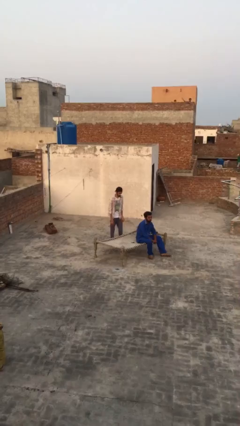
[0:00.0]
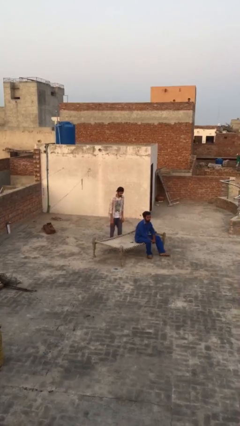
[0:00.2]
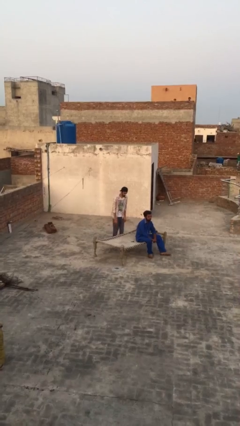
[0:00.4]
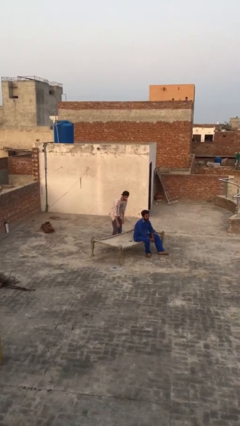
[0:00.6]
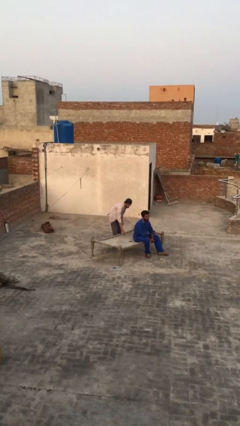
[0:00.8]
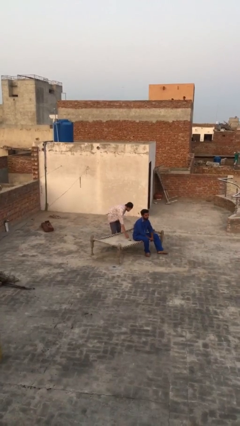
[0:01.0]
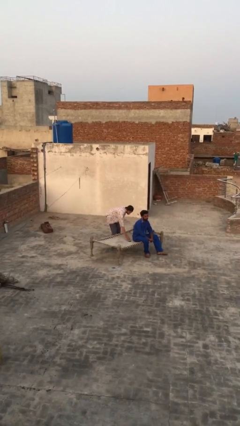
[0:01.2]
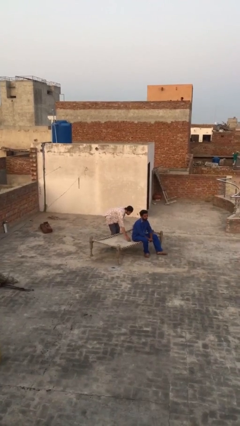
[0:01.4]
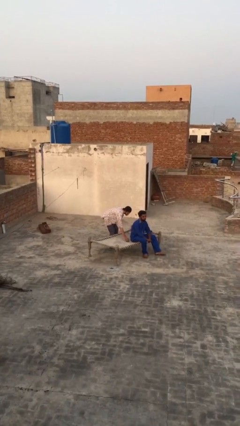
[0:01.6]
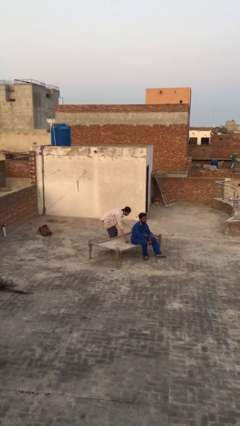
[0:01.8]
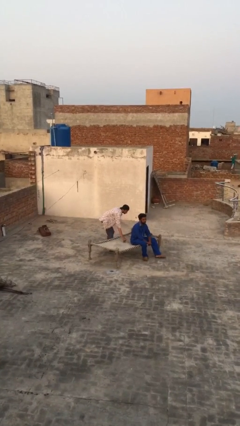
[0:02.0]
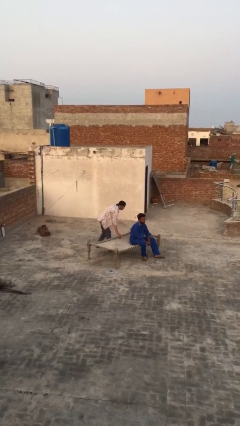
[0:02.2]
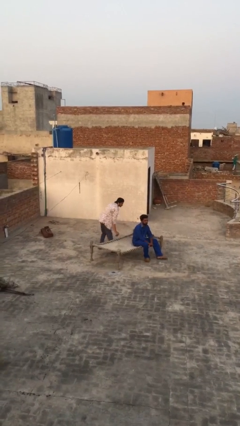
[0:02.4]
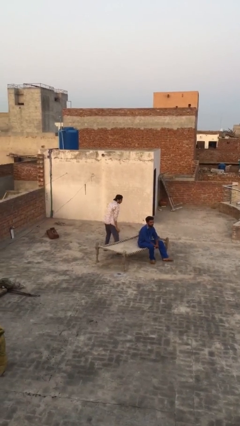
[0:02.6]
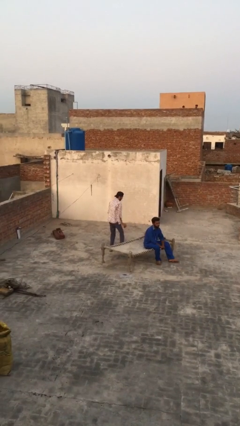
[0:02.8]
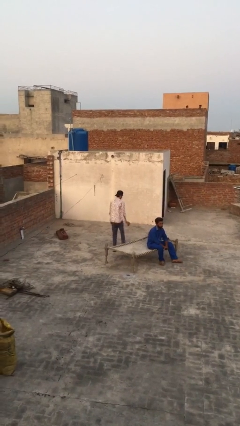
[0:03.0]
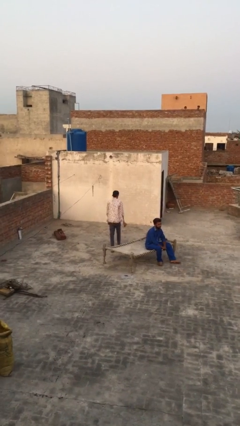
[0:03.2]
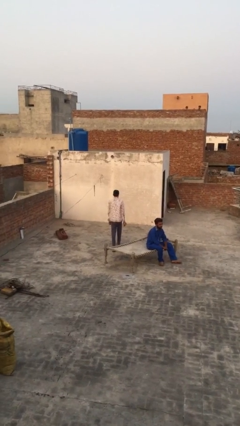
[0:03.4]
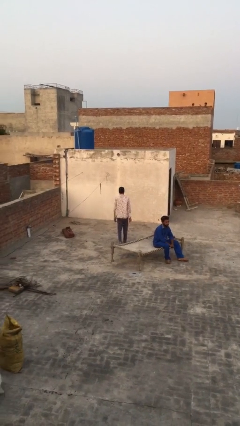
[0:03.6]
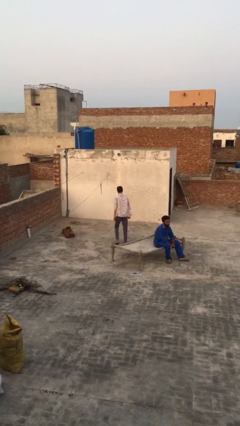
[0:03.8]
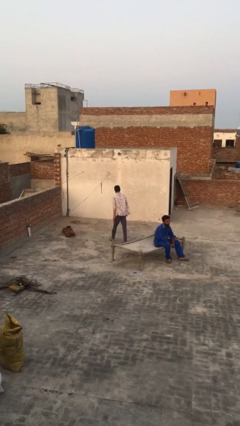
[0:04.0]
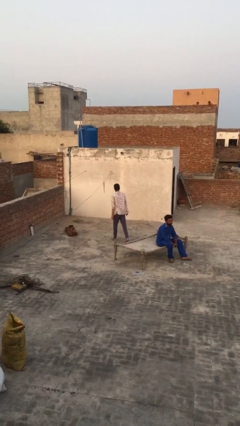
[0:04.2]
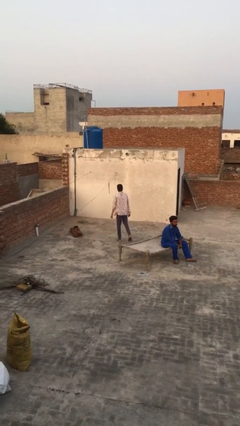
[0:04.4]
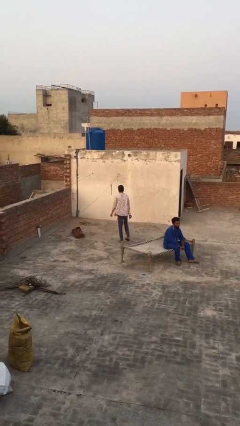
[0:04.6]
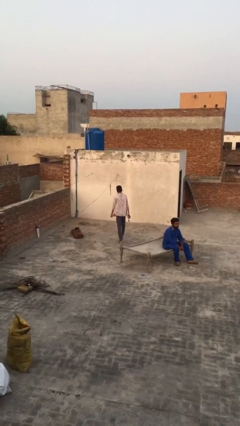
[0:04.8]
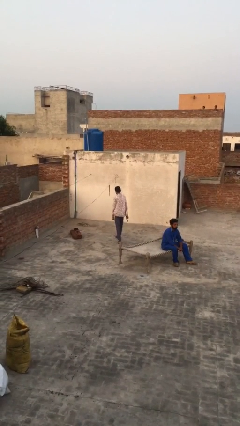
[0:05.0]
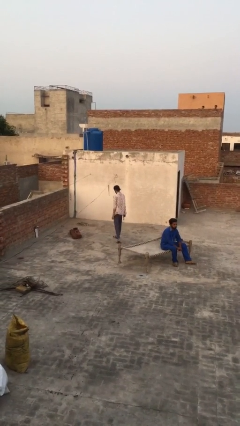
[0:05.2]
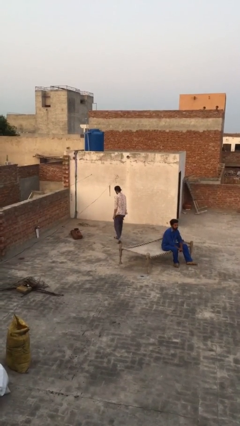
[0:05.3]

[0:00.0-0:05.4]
person steals object from person

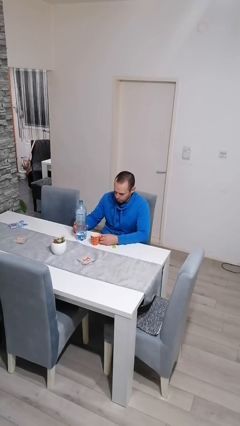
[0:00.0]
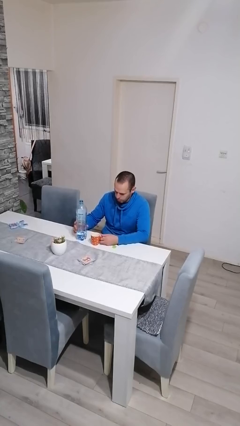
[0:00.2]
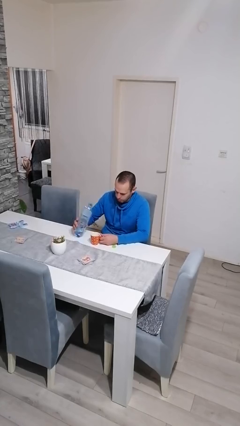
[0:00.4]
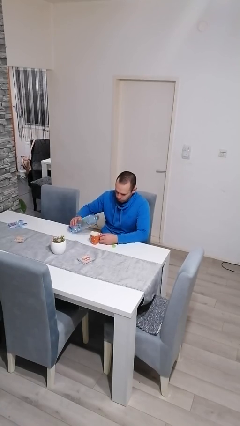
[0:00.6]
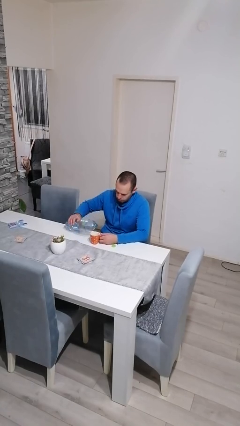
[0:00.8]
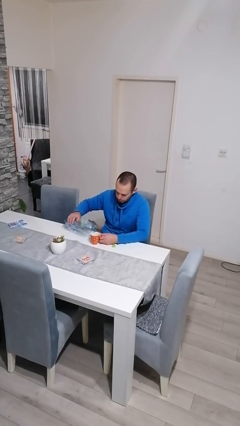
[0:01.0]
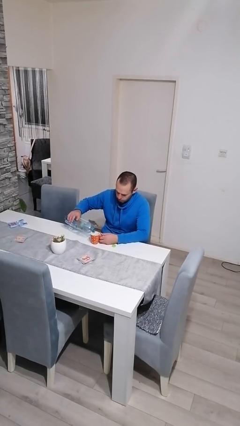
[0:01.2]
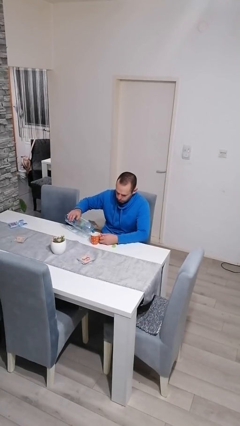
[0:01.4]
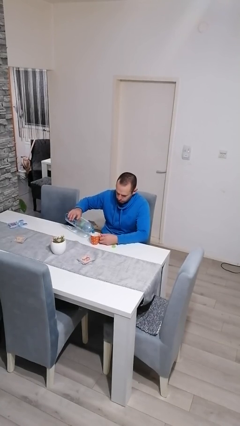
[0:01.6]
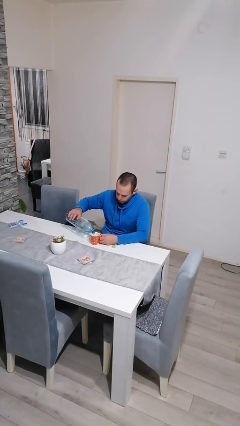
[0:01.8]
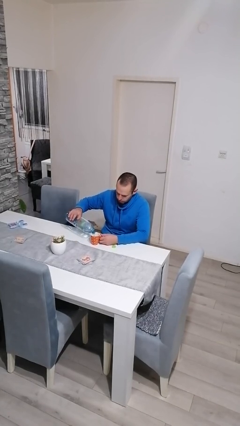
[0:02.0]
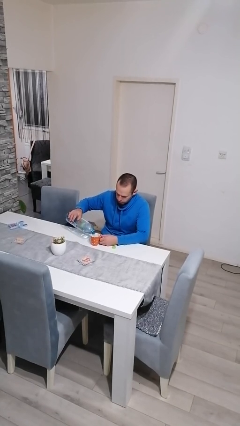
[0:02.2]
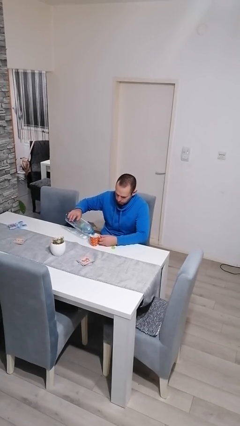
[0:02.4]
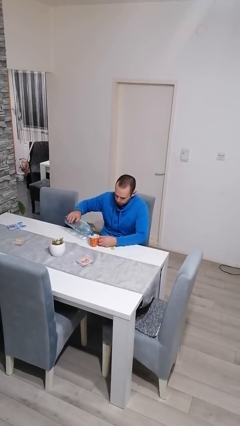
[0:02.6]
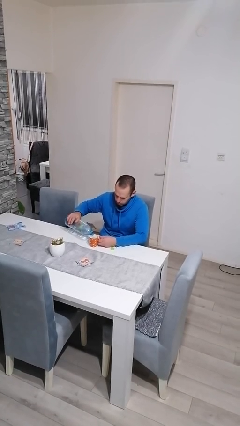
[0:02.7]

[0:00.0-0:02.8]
person pours liquid into cup

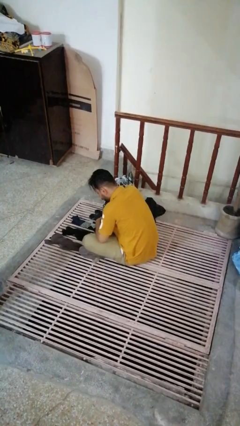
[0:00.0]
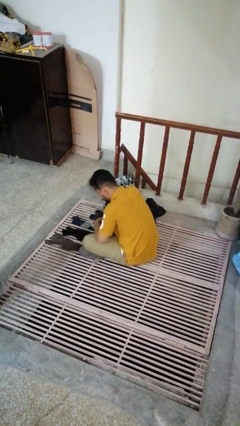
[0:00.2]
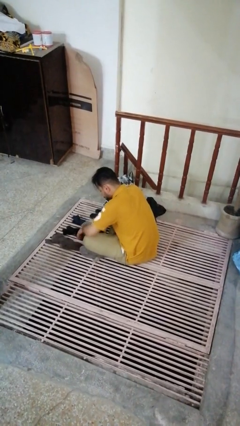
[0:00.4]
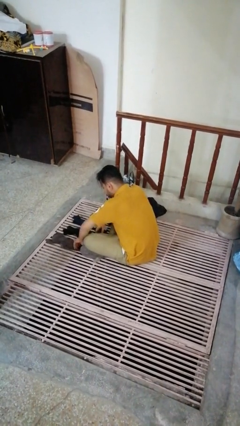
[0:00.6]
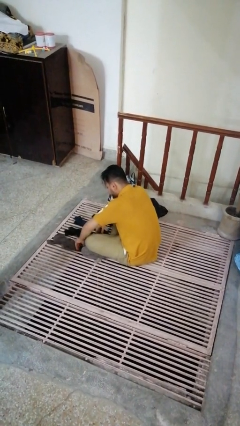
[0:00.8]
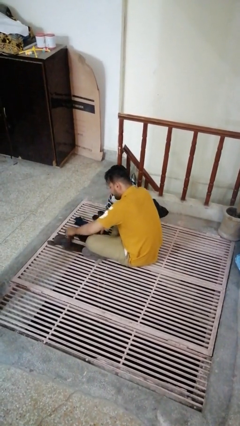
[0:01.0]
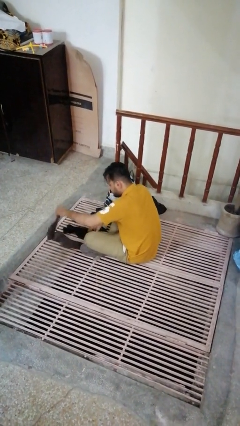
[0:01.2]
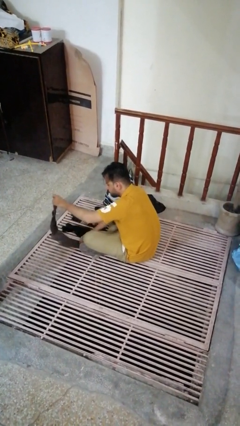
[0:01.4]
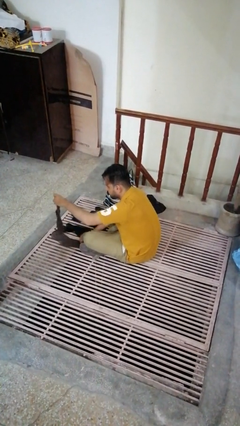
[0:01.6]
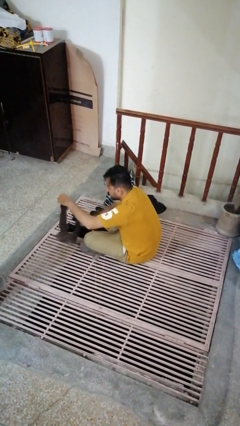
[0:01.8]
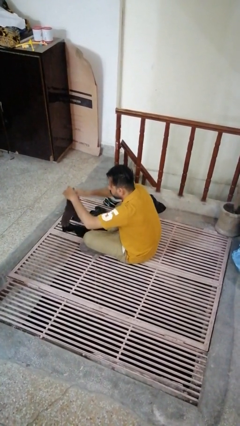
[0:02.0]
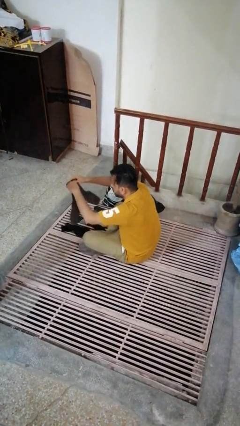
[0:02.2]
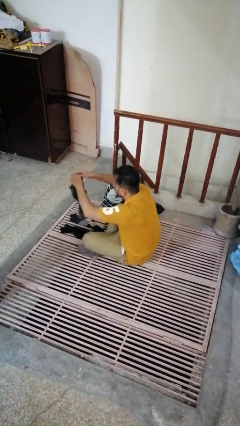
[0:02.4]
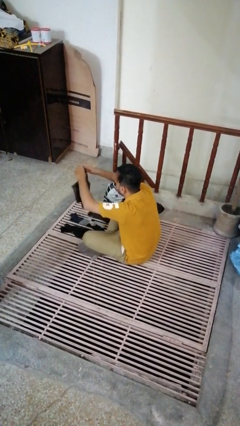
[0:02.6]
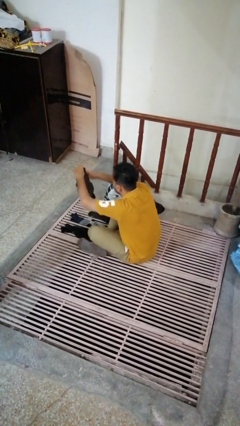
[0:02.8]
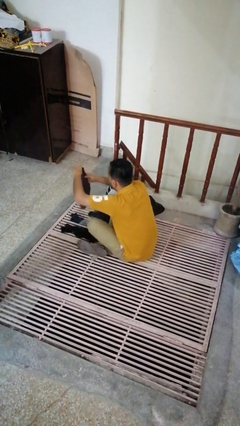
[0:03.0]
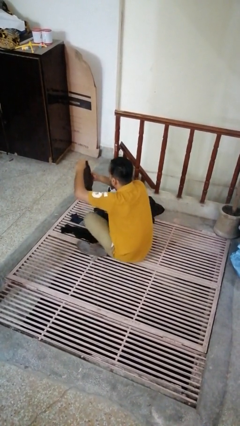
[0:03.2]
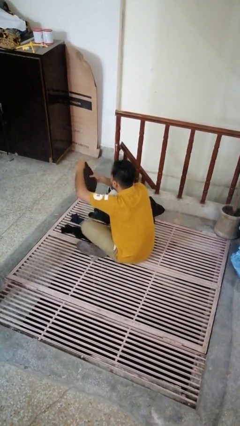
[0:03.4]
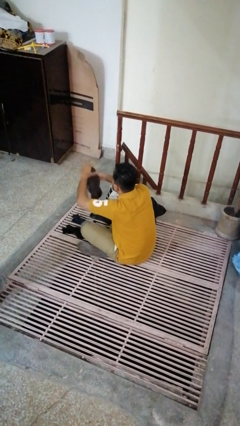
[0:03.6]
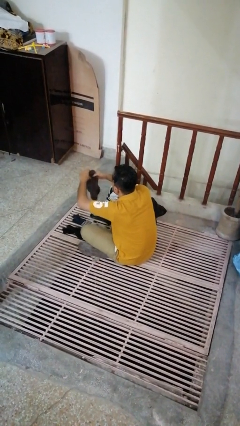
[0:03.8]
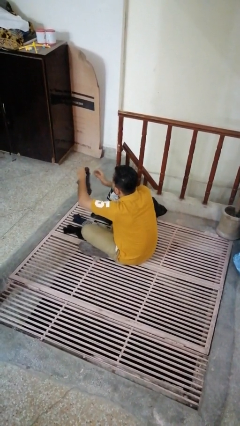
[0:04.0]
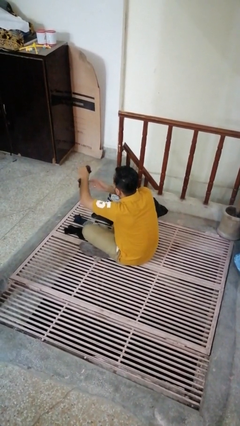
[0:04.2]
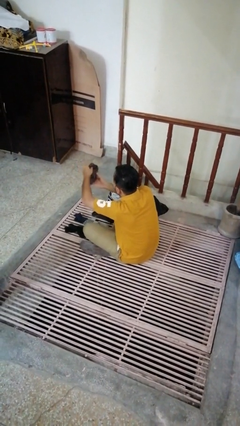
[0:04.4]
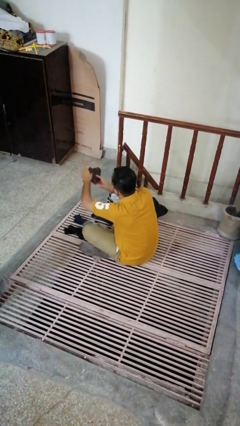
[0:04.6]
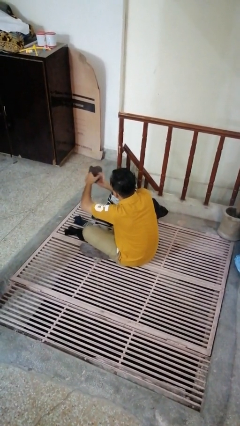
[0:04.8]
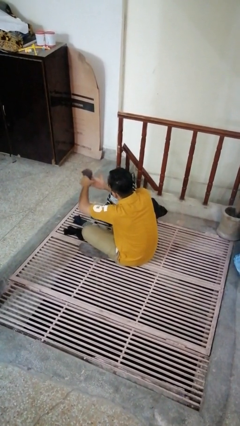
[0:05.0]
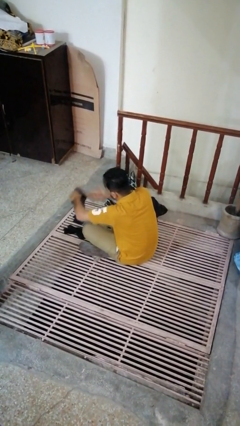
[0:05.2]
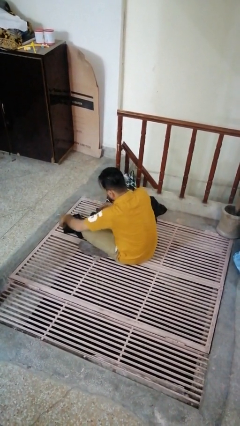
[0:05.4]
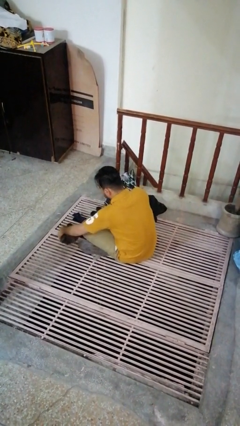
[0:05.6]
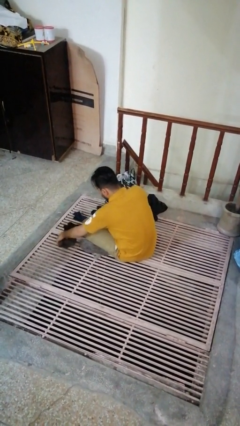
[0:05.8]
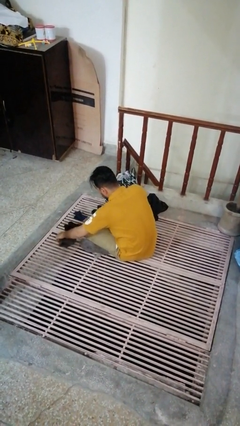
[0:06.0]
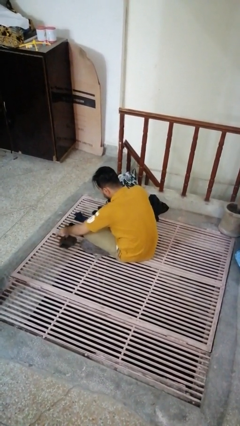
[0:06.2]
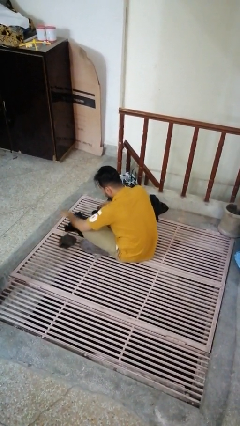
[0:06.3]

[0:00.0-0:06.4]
person folds socks

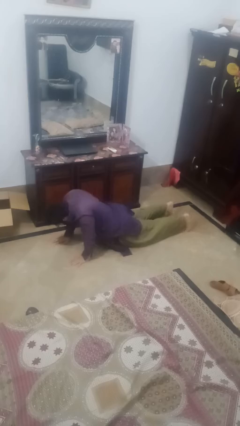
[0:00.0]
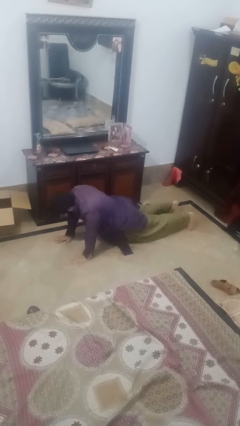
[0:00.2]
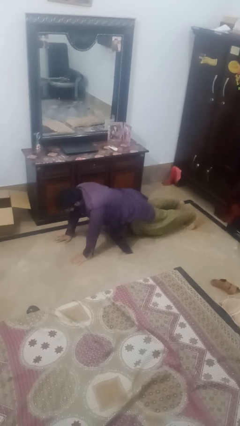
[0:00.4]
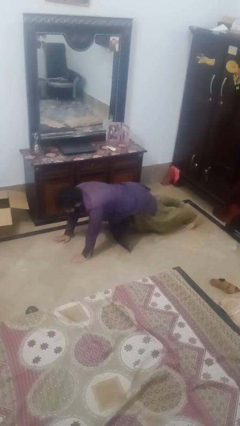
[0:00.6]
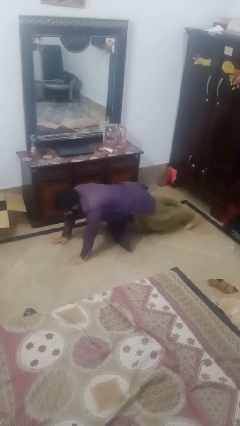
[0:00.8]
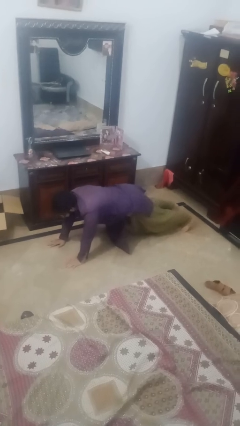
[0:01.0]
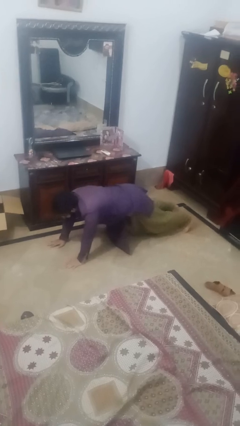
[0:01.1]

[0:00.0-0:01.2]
person exercises with pushup

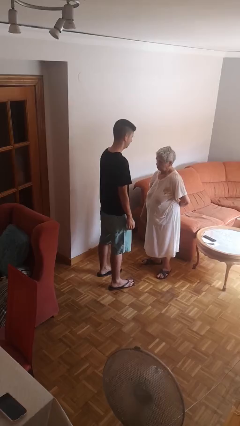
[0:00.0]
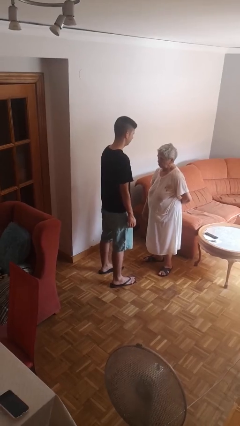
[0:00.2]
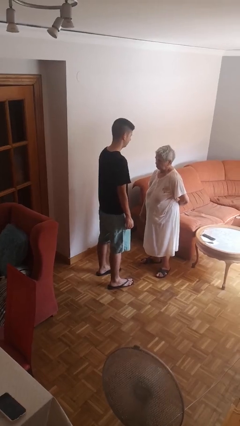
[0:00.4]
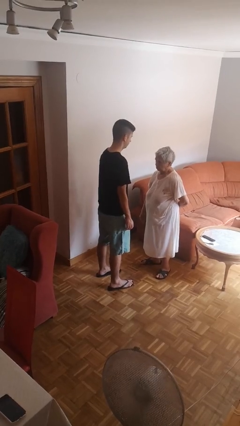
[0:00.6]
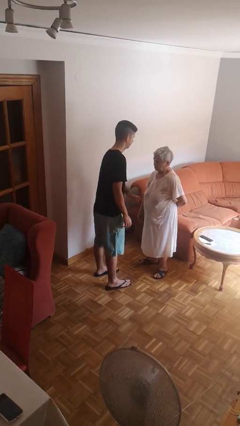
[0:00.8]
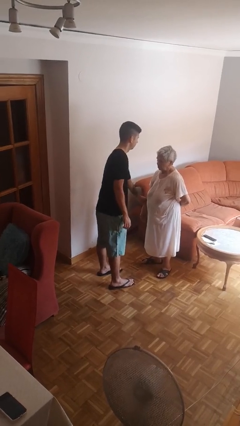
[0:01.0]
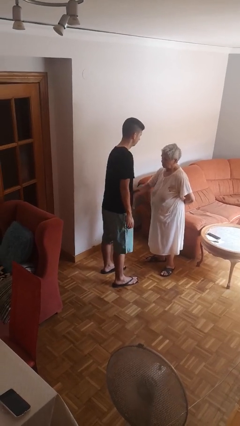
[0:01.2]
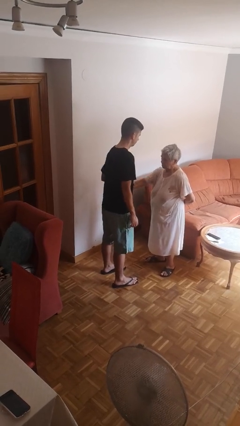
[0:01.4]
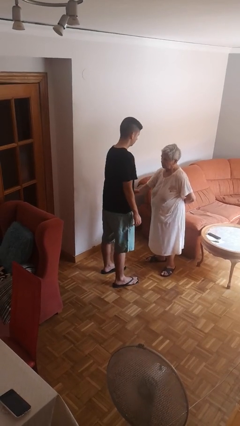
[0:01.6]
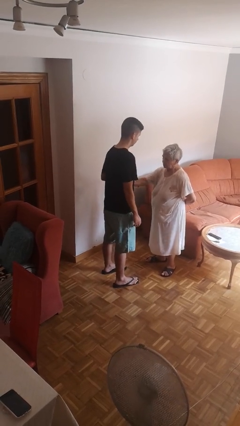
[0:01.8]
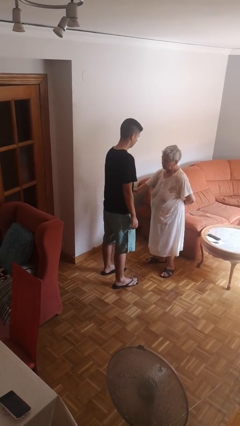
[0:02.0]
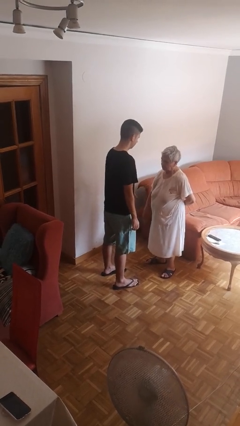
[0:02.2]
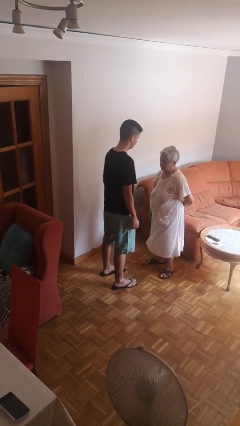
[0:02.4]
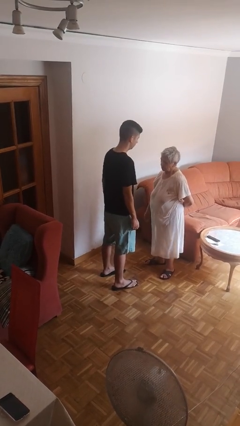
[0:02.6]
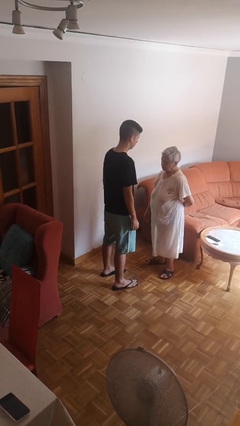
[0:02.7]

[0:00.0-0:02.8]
person grabs person by forearm
